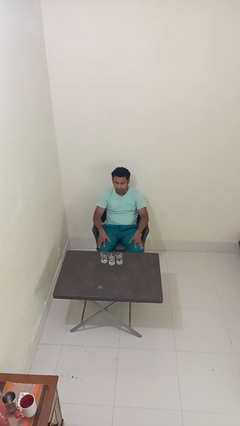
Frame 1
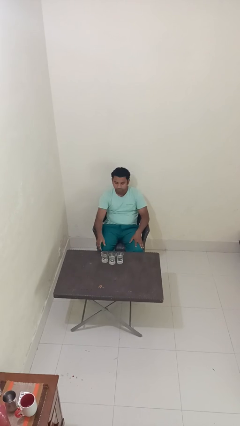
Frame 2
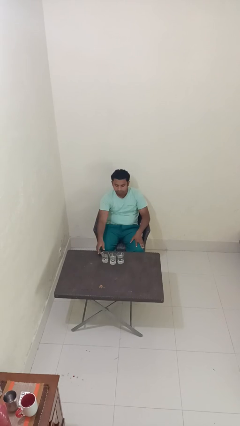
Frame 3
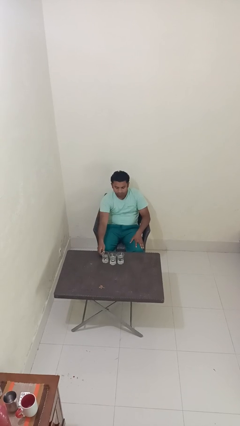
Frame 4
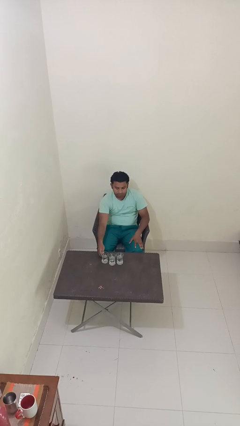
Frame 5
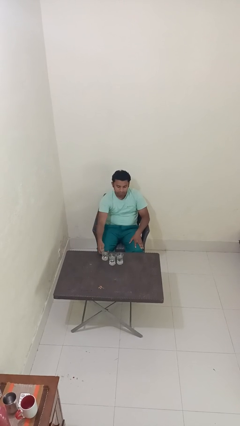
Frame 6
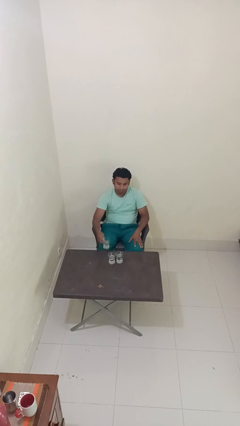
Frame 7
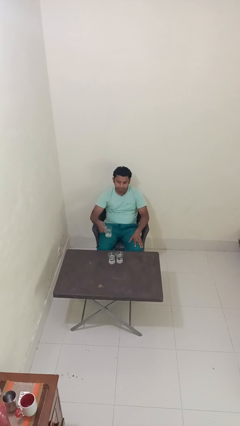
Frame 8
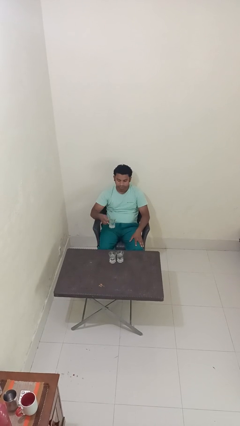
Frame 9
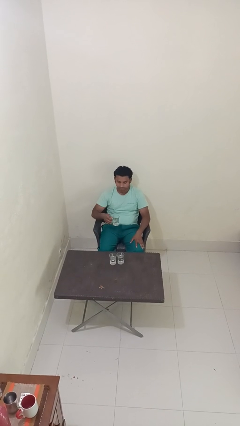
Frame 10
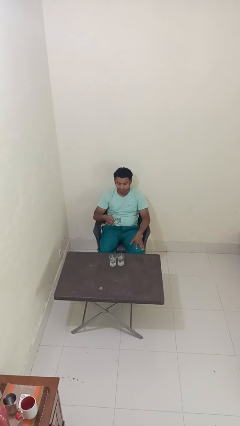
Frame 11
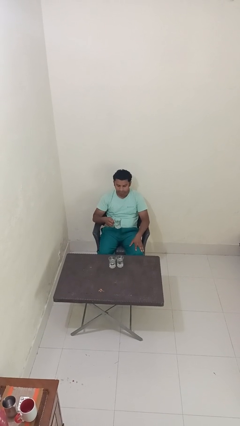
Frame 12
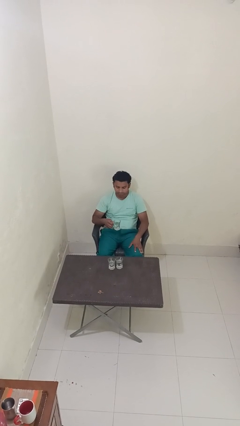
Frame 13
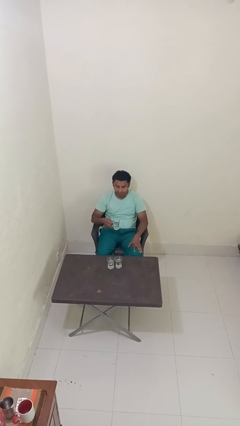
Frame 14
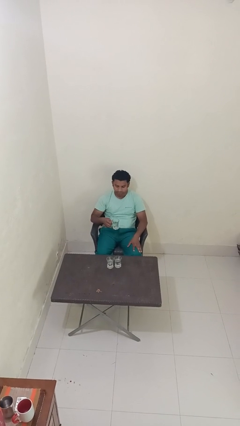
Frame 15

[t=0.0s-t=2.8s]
person picks up object from table

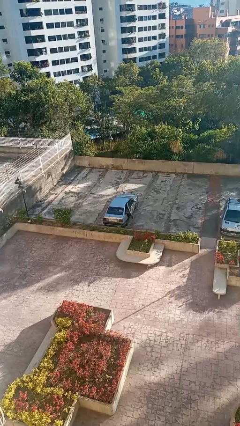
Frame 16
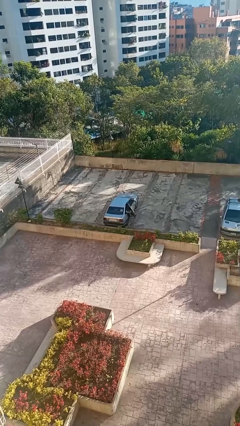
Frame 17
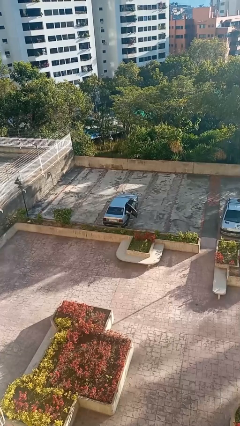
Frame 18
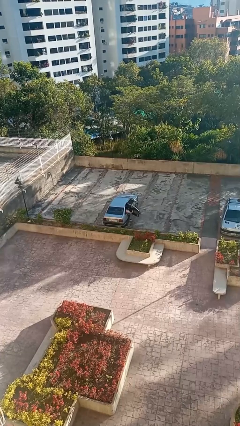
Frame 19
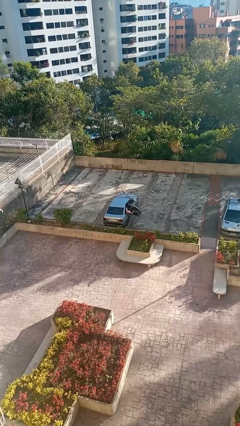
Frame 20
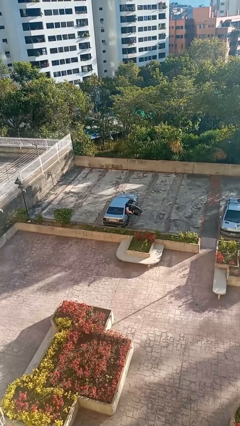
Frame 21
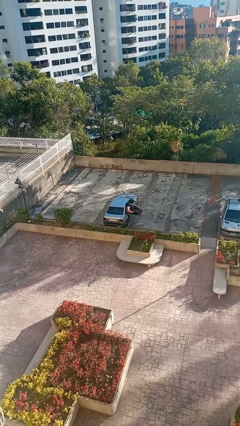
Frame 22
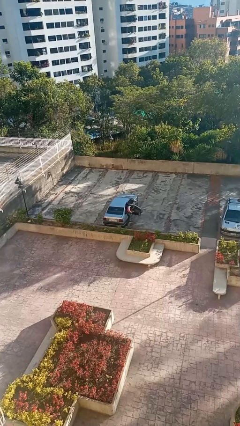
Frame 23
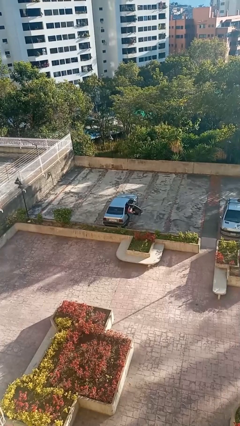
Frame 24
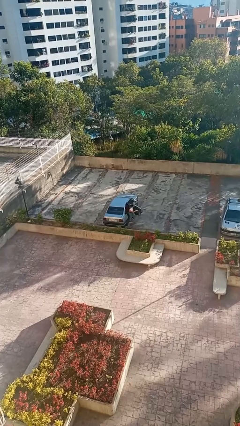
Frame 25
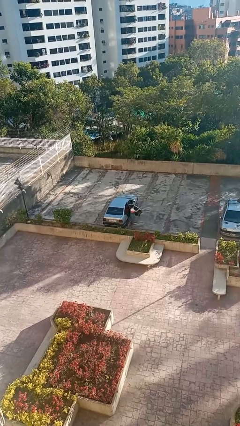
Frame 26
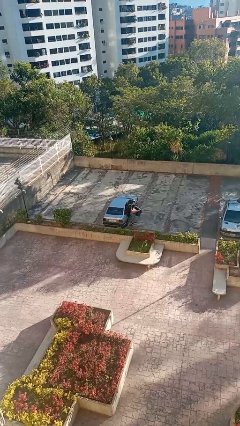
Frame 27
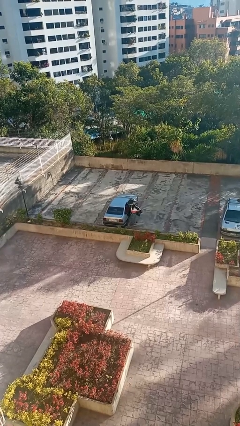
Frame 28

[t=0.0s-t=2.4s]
car drops off person

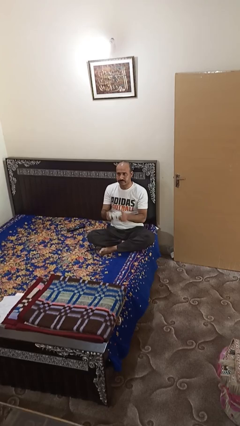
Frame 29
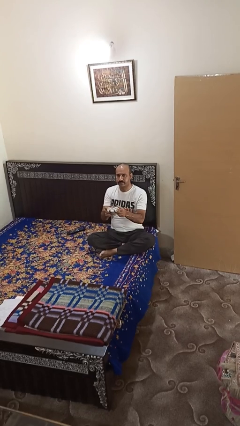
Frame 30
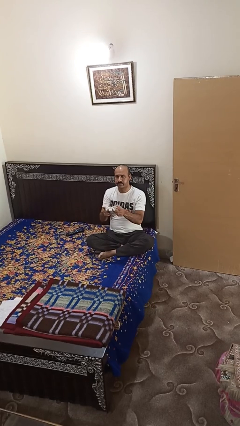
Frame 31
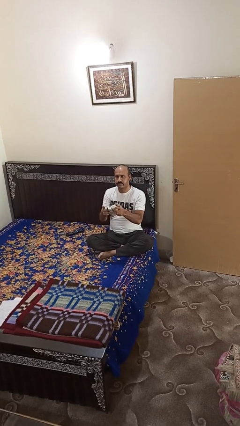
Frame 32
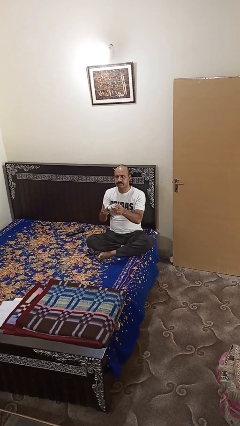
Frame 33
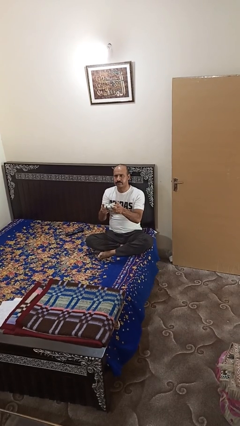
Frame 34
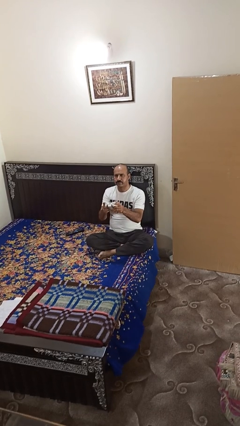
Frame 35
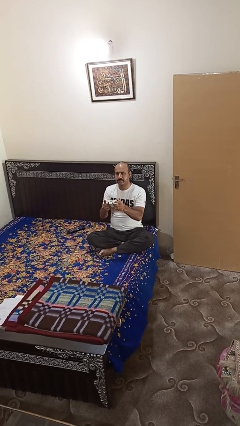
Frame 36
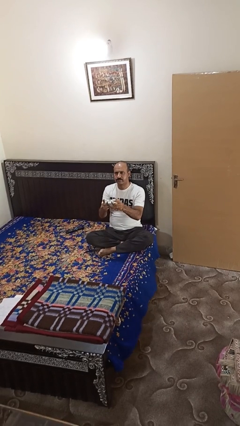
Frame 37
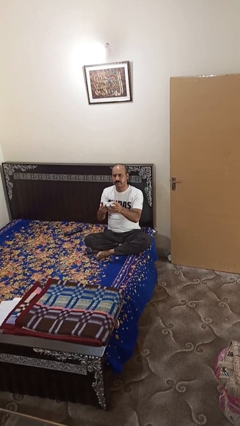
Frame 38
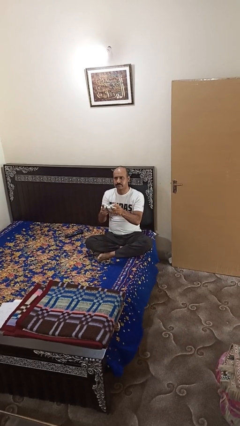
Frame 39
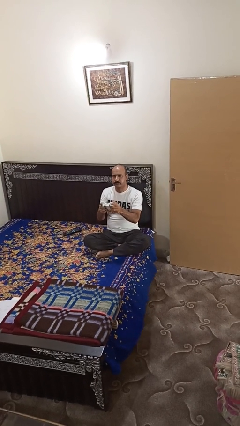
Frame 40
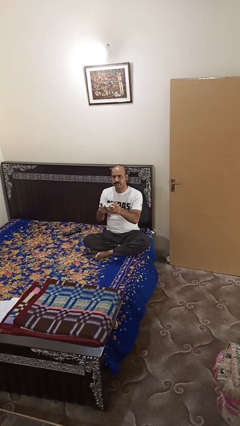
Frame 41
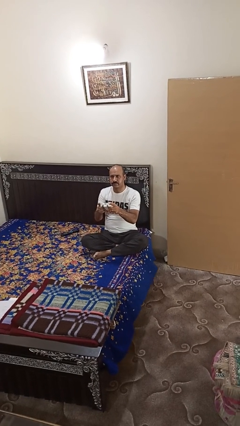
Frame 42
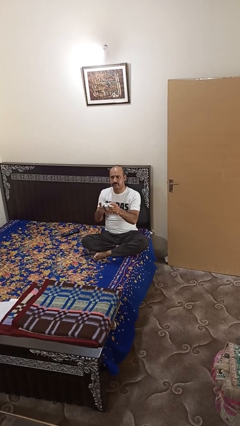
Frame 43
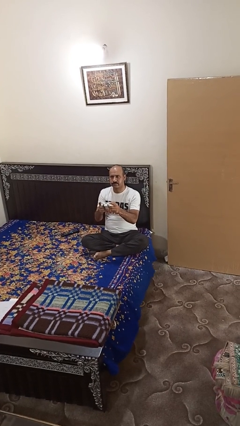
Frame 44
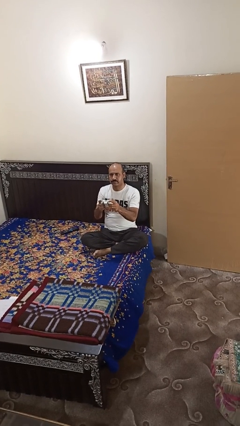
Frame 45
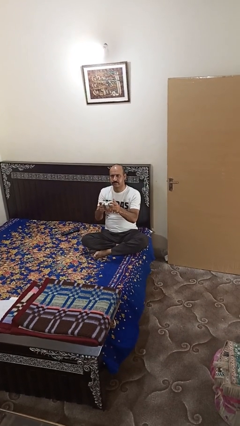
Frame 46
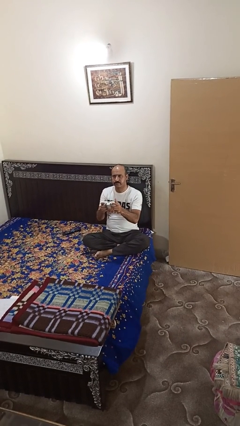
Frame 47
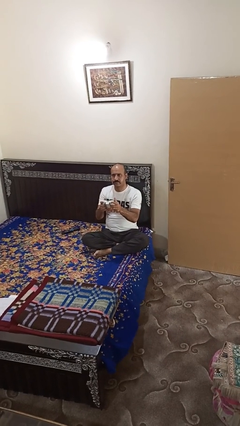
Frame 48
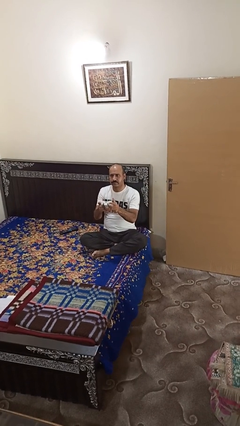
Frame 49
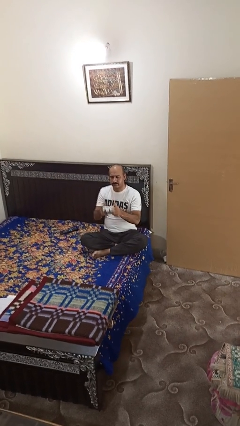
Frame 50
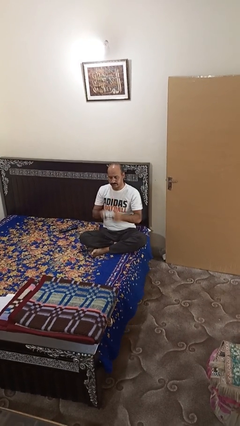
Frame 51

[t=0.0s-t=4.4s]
person interacts with handheld game

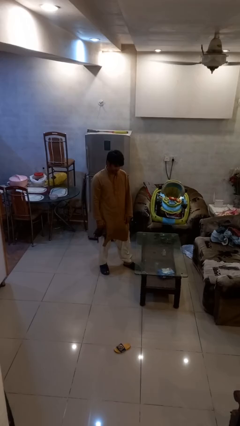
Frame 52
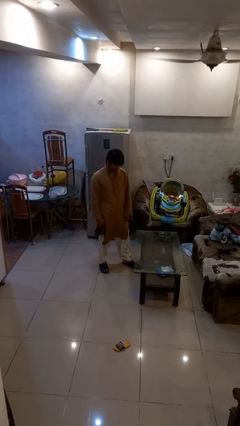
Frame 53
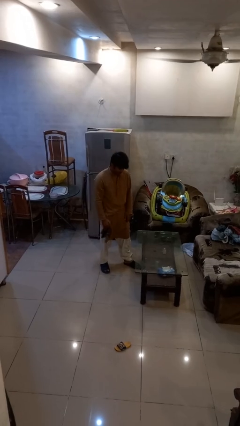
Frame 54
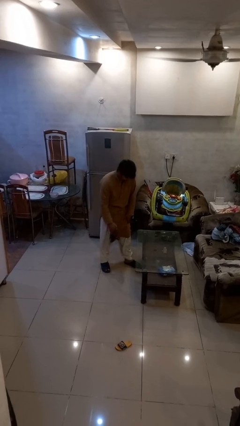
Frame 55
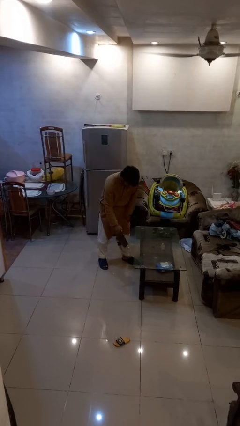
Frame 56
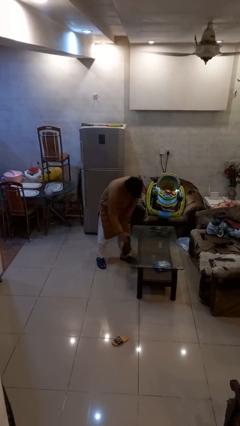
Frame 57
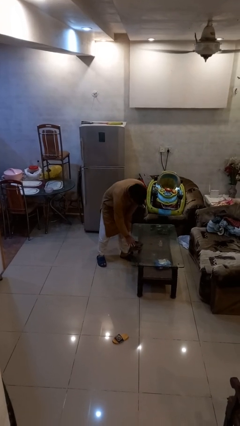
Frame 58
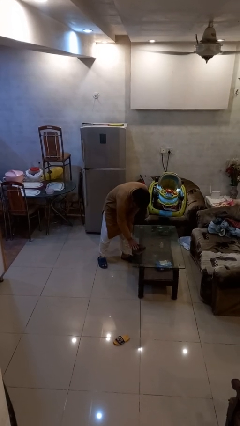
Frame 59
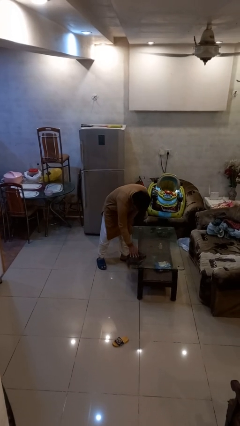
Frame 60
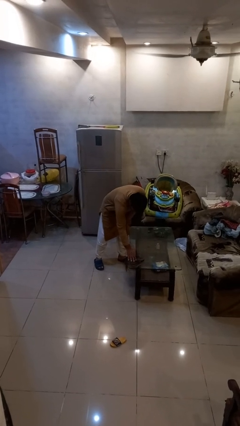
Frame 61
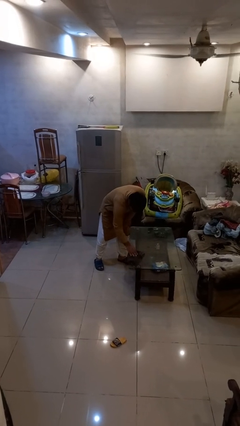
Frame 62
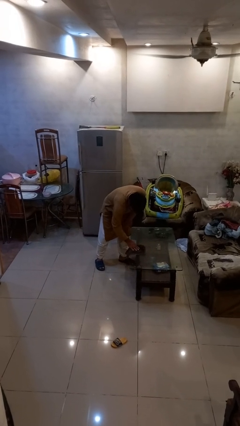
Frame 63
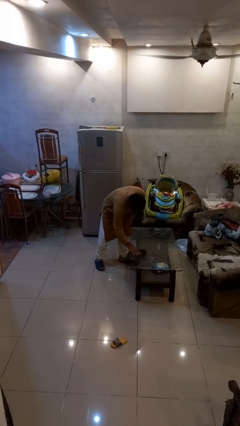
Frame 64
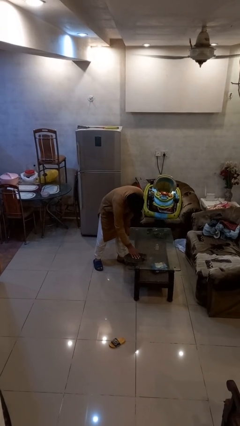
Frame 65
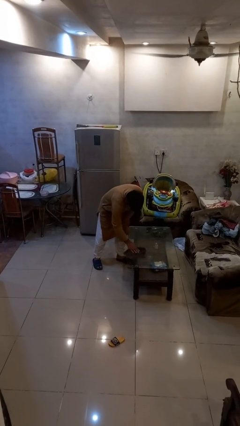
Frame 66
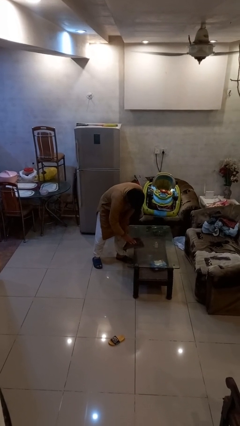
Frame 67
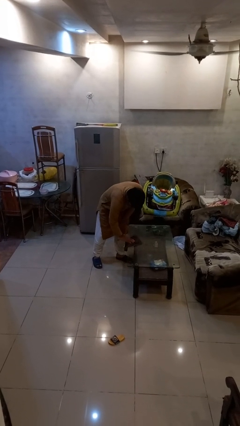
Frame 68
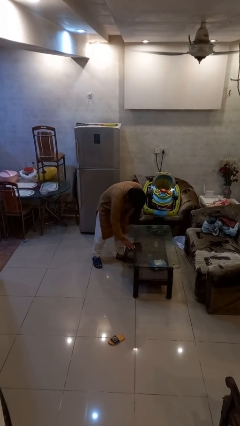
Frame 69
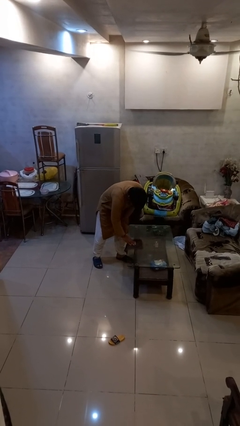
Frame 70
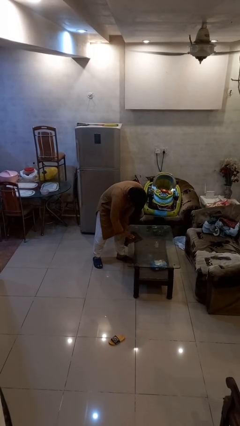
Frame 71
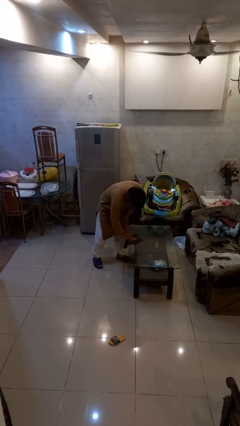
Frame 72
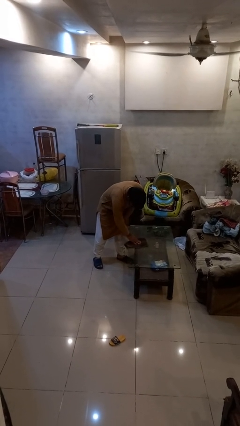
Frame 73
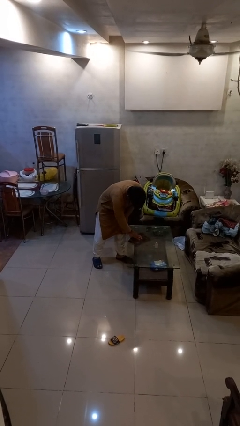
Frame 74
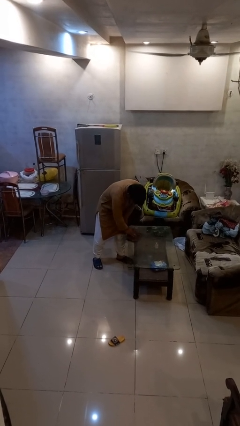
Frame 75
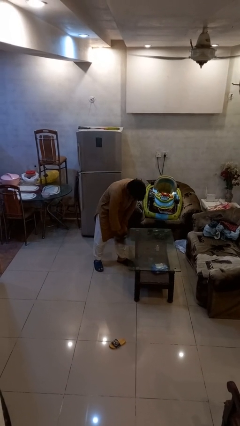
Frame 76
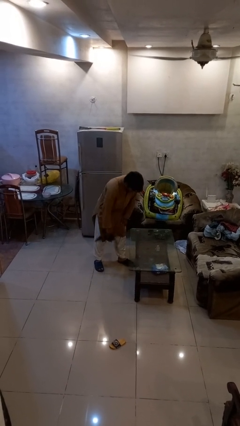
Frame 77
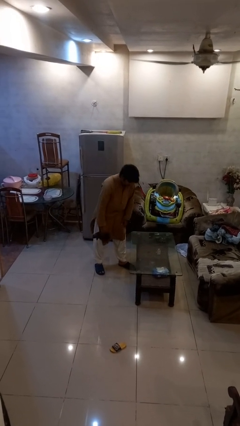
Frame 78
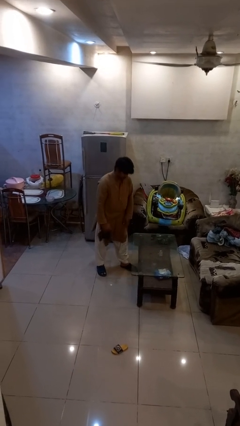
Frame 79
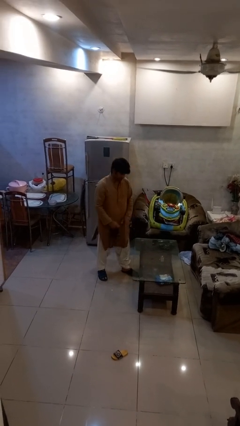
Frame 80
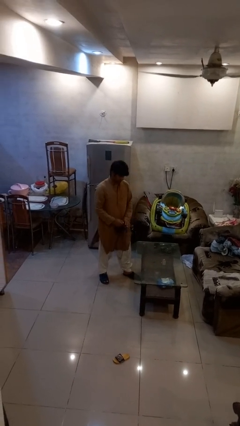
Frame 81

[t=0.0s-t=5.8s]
person cleans table with rag

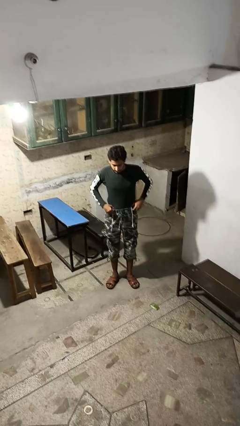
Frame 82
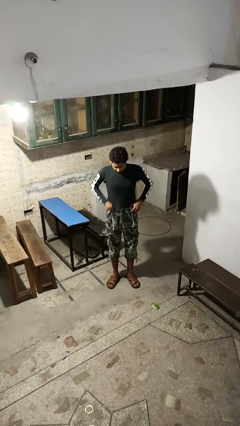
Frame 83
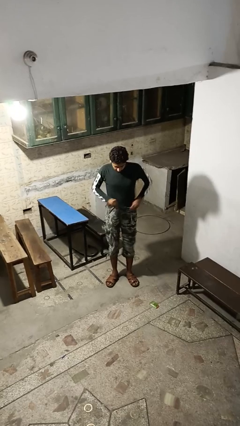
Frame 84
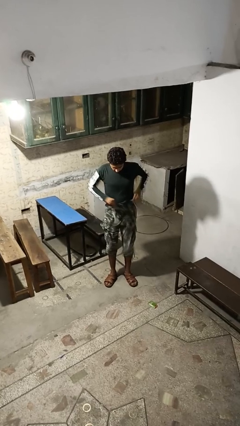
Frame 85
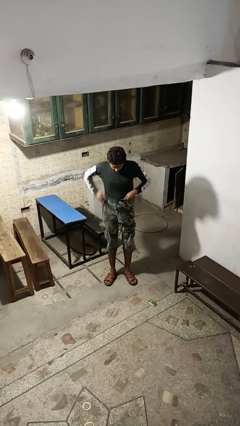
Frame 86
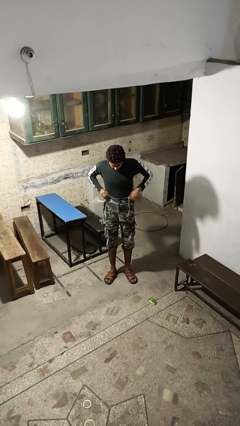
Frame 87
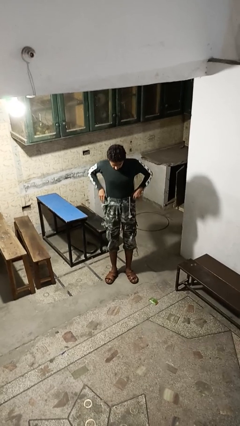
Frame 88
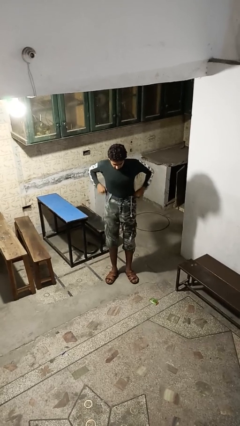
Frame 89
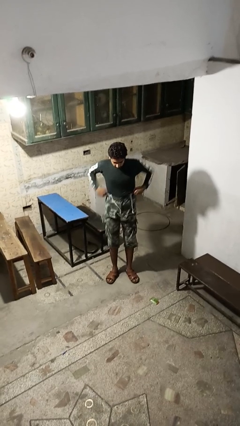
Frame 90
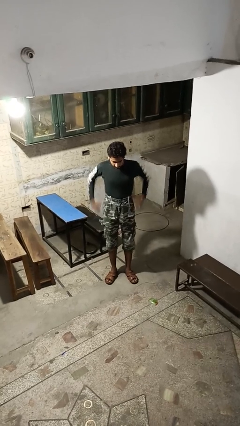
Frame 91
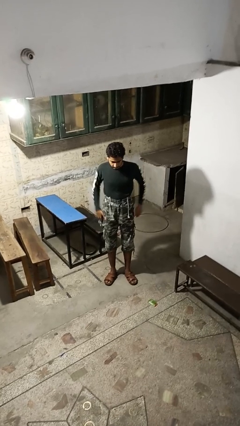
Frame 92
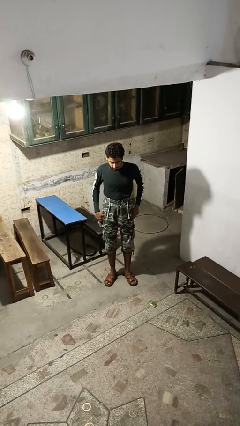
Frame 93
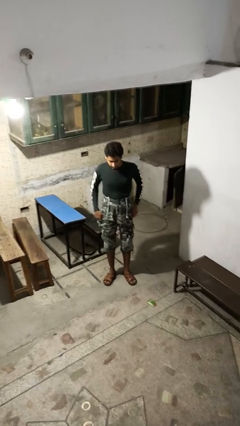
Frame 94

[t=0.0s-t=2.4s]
person hikes up pants
